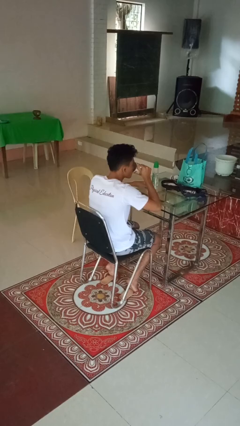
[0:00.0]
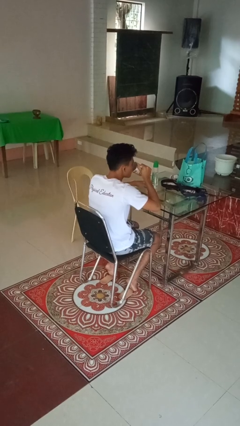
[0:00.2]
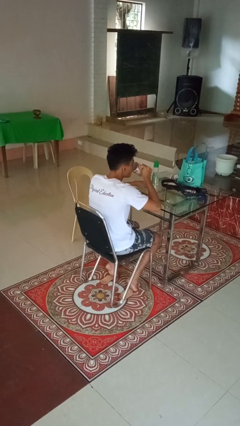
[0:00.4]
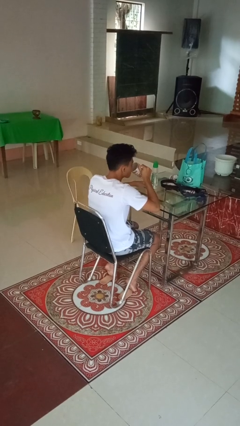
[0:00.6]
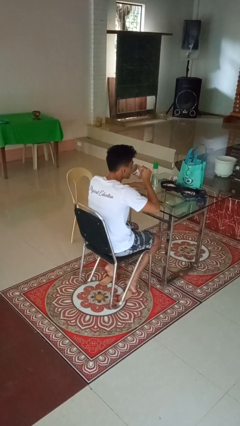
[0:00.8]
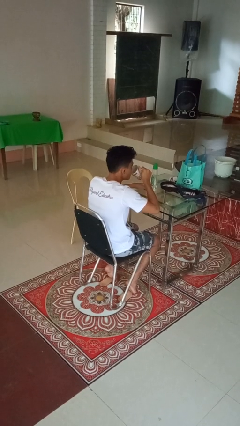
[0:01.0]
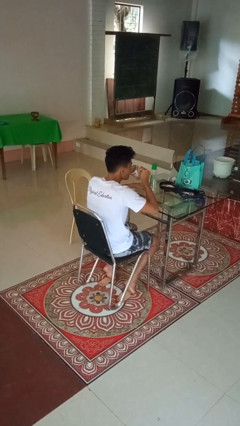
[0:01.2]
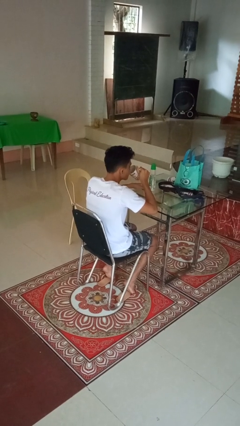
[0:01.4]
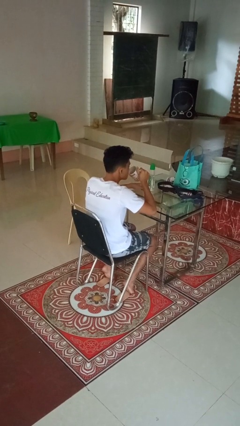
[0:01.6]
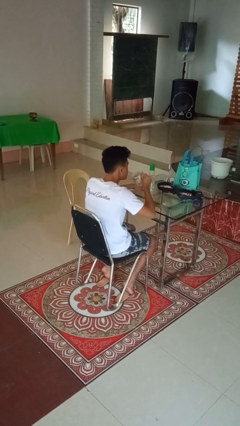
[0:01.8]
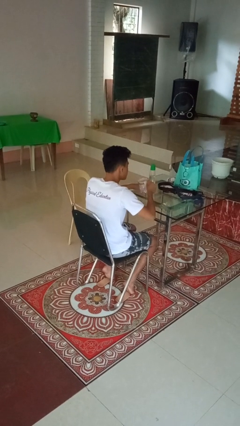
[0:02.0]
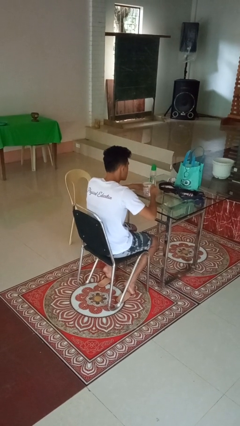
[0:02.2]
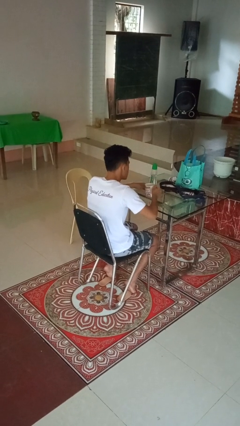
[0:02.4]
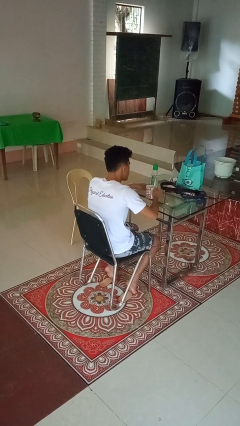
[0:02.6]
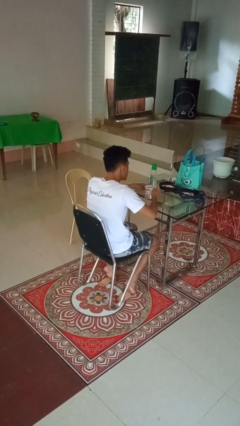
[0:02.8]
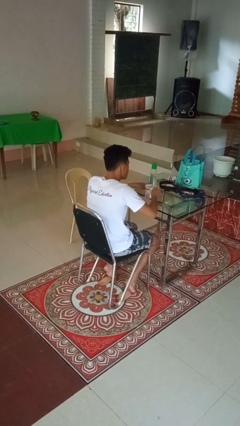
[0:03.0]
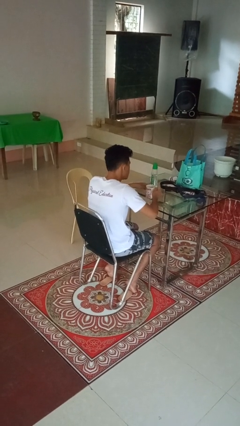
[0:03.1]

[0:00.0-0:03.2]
person drinks from shotglass

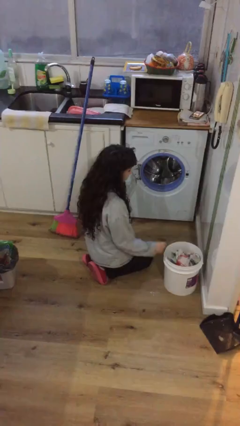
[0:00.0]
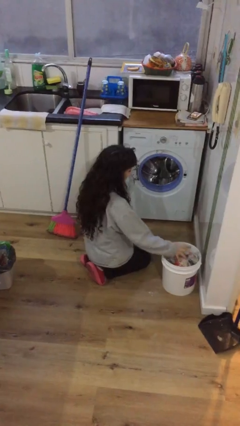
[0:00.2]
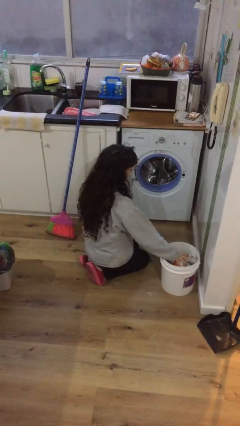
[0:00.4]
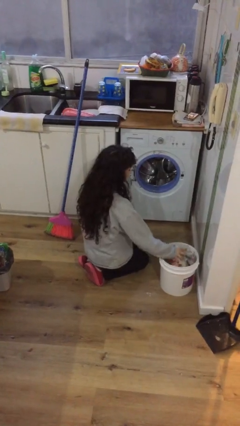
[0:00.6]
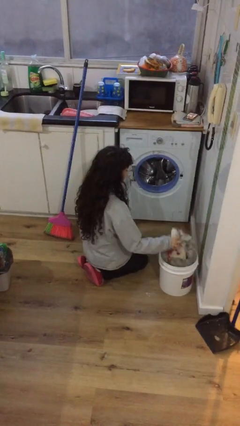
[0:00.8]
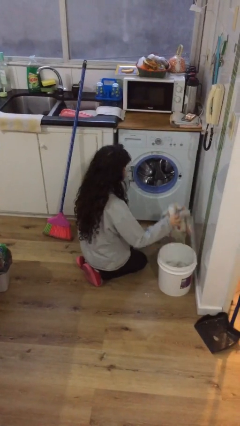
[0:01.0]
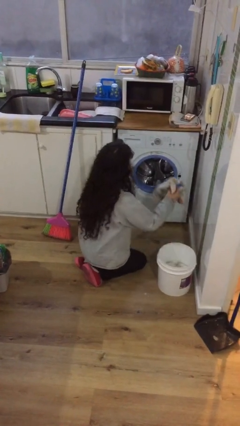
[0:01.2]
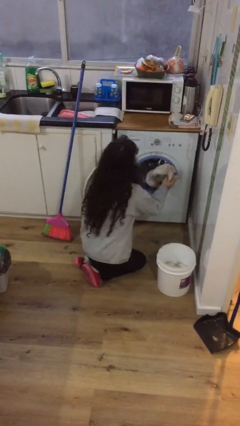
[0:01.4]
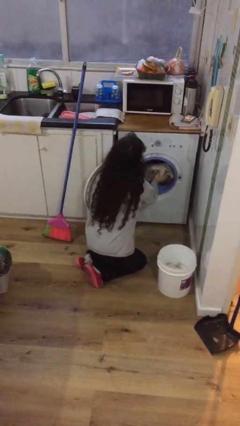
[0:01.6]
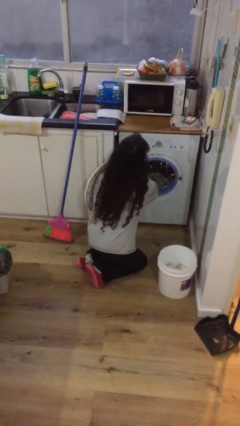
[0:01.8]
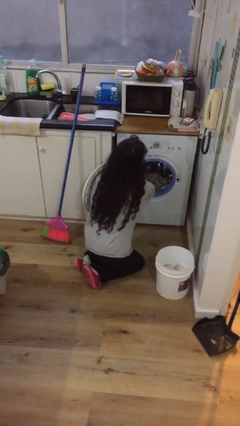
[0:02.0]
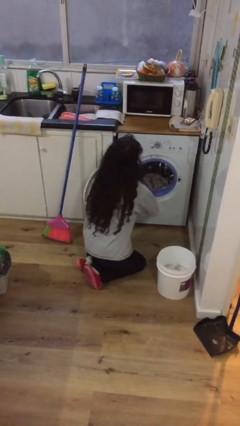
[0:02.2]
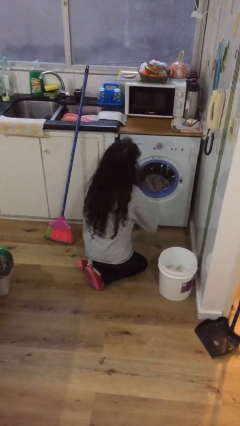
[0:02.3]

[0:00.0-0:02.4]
person loads dryer

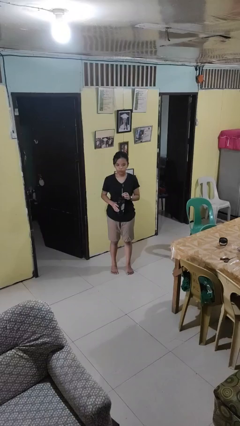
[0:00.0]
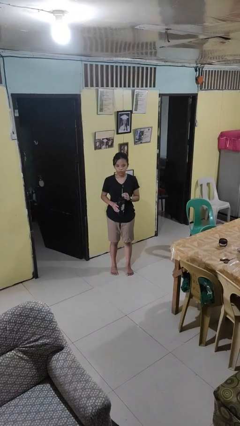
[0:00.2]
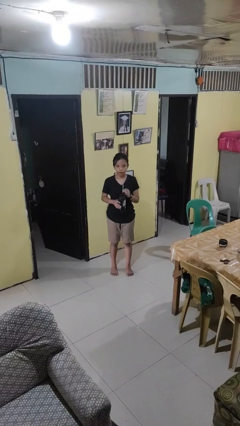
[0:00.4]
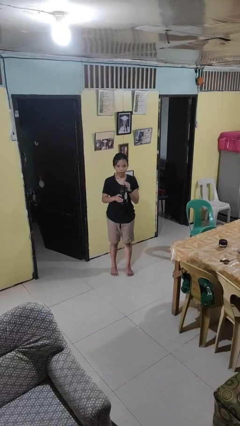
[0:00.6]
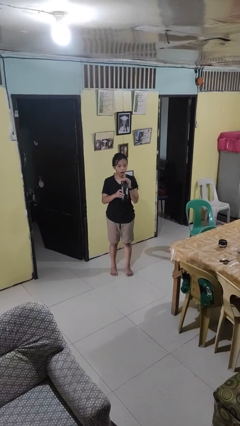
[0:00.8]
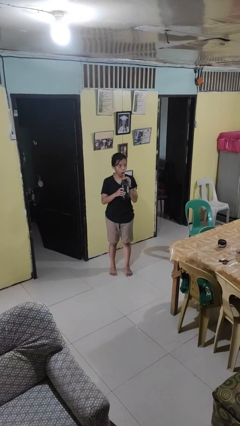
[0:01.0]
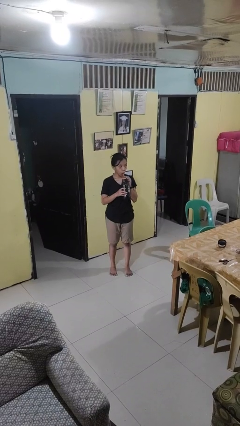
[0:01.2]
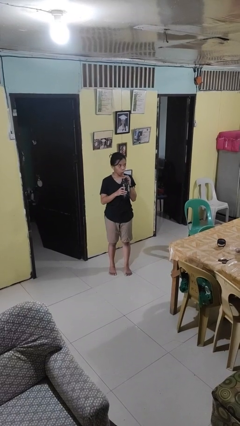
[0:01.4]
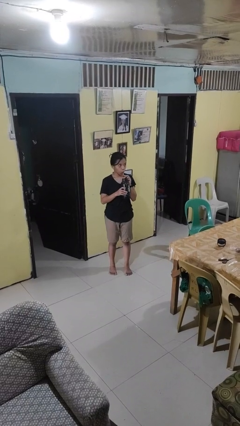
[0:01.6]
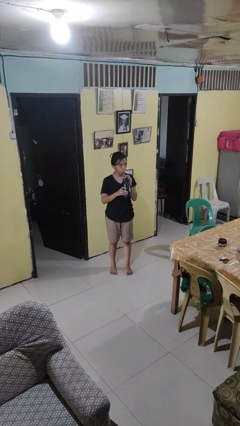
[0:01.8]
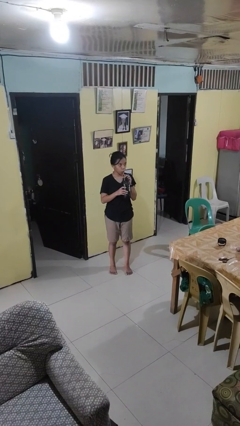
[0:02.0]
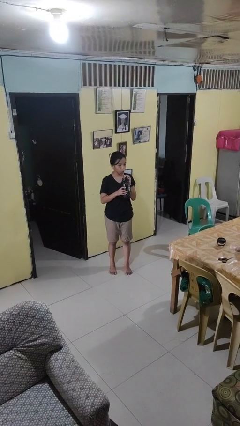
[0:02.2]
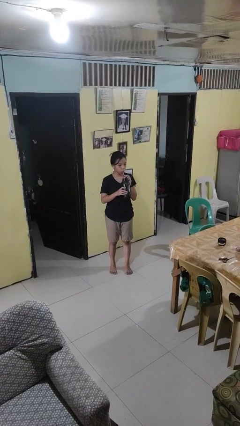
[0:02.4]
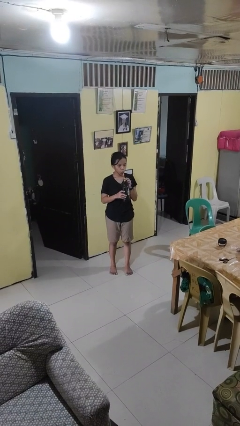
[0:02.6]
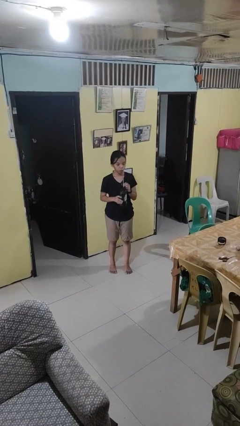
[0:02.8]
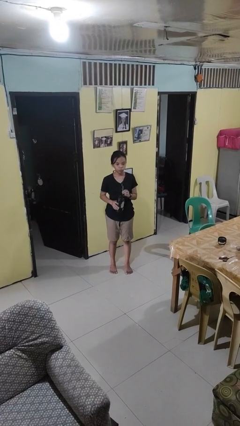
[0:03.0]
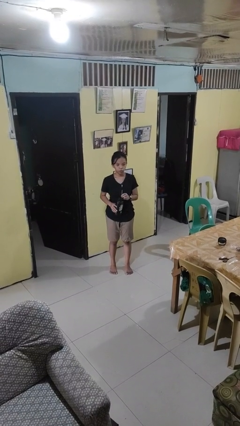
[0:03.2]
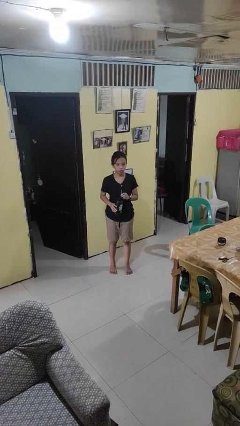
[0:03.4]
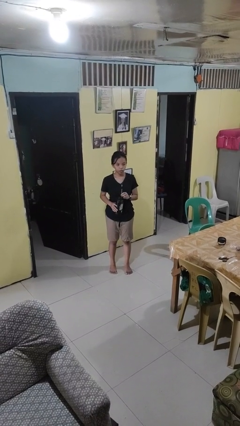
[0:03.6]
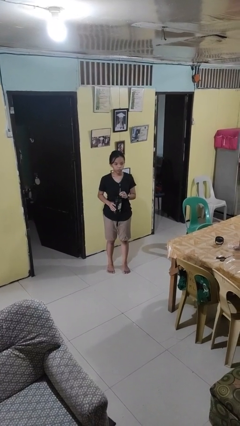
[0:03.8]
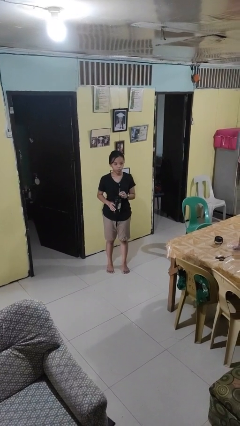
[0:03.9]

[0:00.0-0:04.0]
person drinks from straw

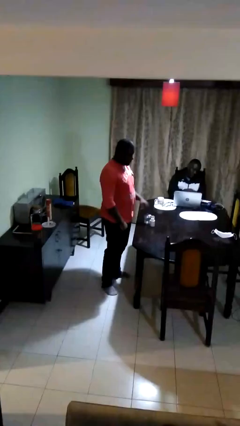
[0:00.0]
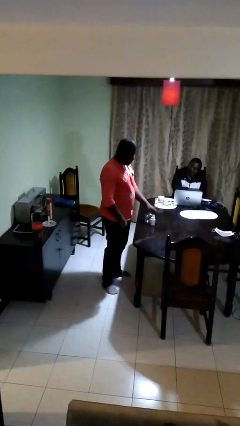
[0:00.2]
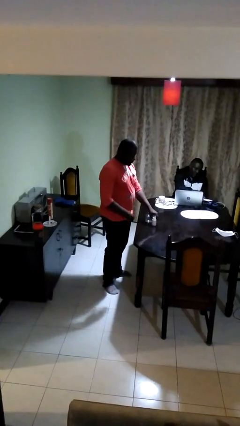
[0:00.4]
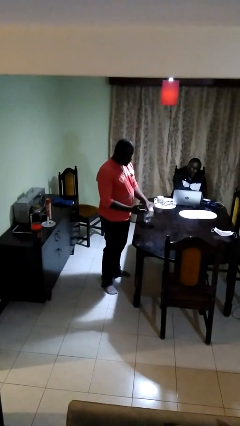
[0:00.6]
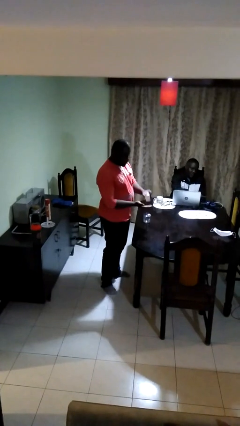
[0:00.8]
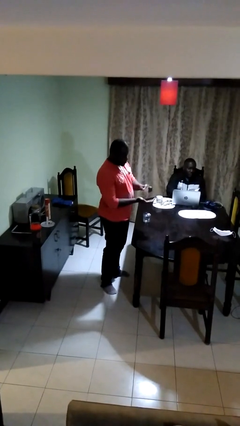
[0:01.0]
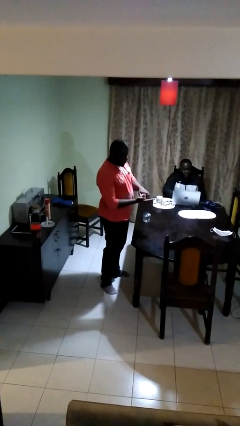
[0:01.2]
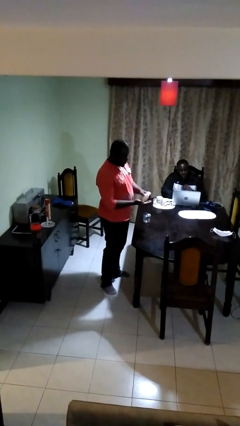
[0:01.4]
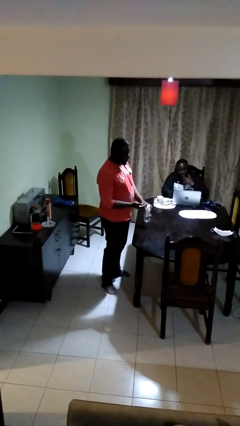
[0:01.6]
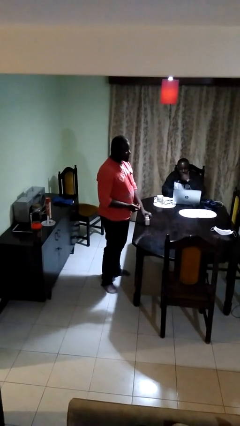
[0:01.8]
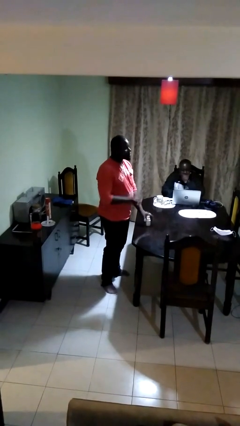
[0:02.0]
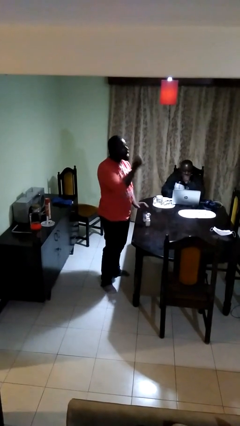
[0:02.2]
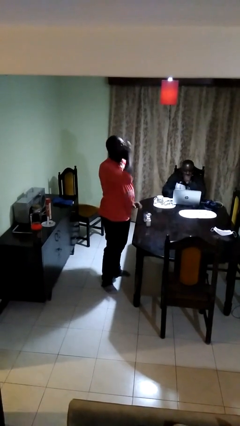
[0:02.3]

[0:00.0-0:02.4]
person takes medicine pills

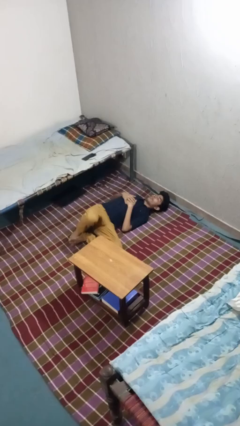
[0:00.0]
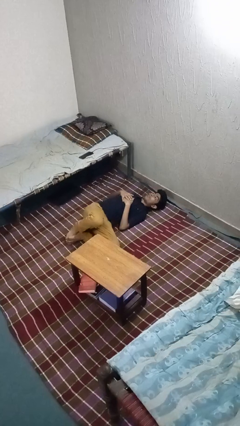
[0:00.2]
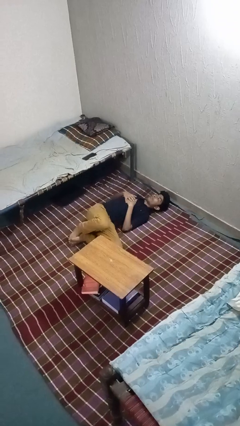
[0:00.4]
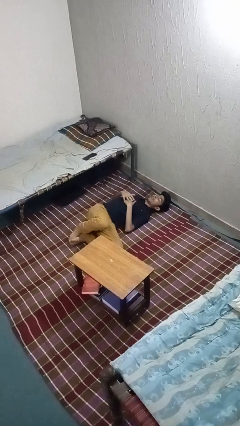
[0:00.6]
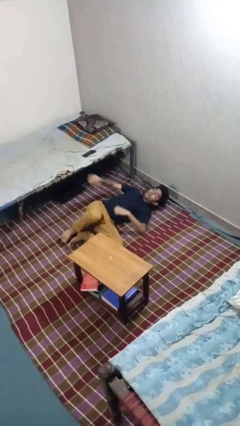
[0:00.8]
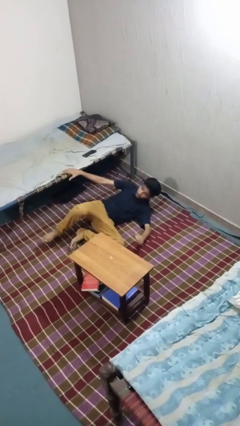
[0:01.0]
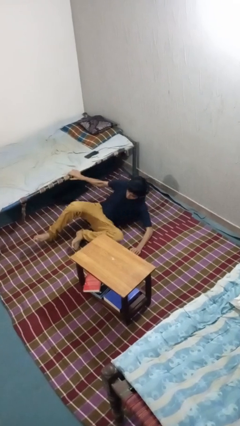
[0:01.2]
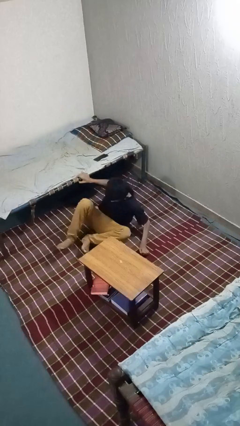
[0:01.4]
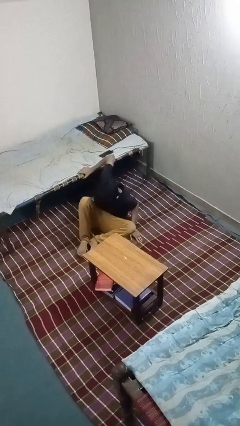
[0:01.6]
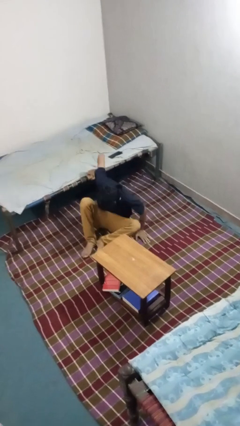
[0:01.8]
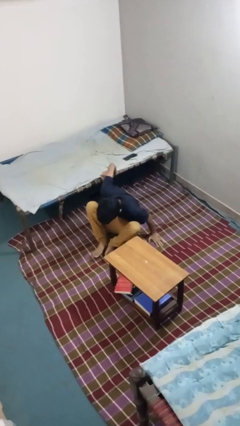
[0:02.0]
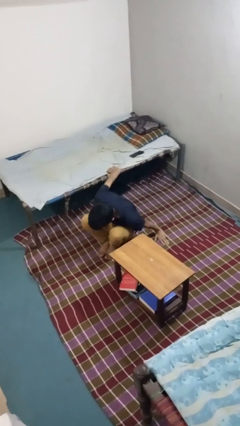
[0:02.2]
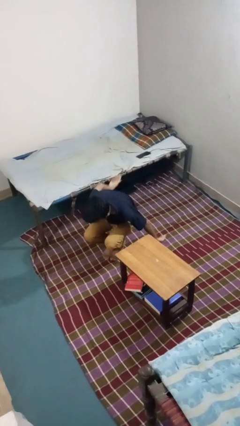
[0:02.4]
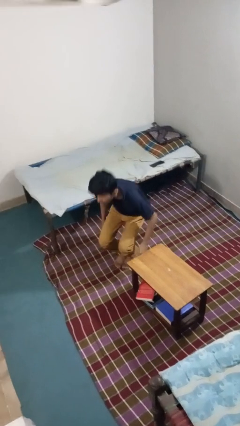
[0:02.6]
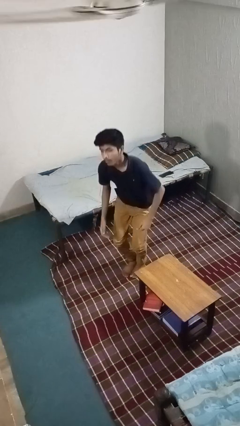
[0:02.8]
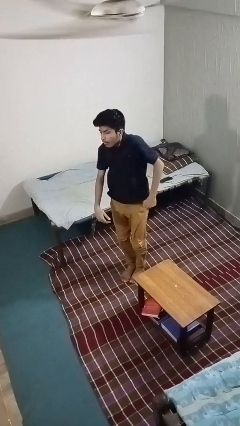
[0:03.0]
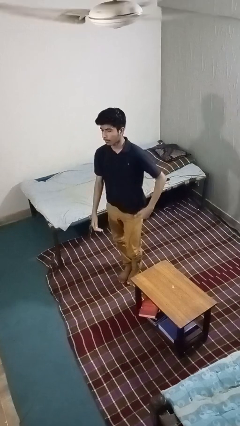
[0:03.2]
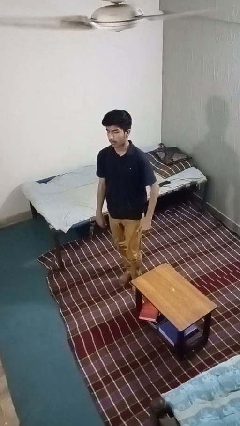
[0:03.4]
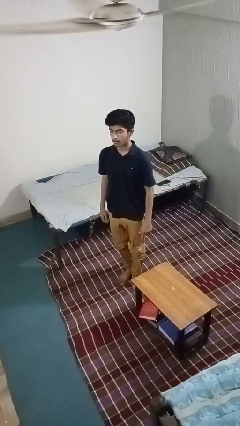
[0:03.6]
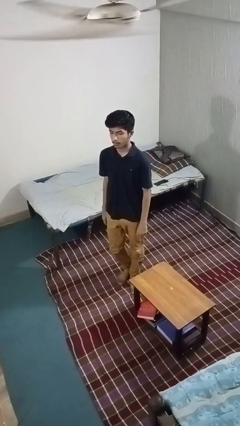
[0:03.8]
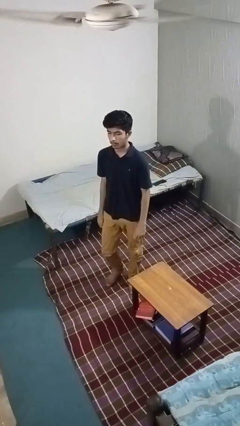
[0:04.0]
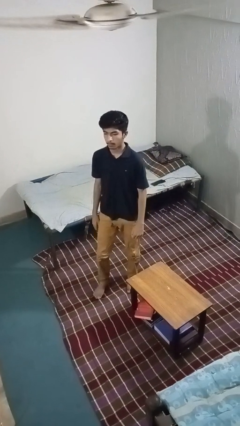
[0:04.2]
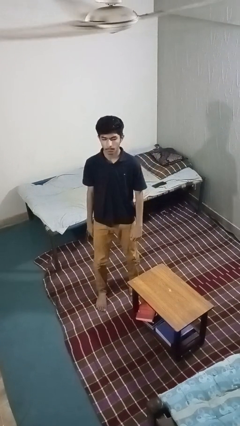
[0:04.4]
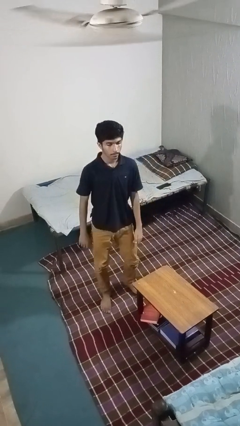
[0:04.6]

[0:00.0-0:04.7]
person stands up from floor

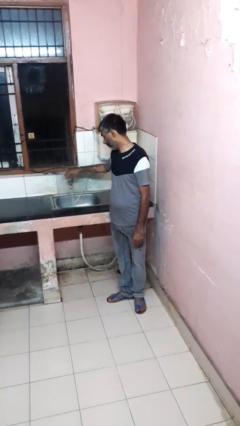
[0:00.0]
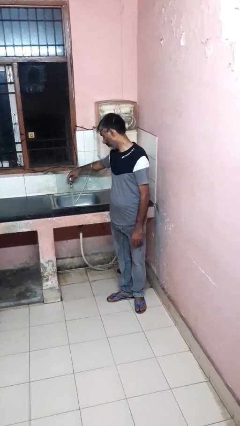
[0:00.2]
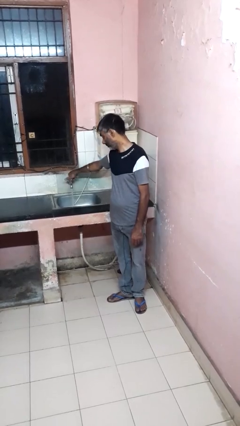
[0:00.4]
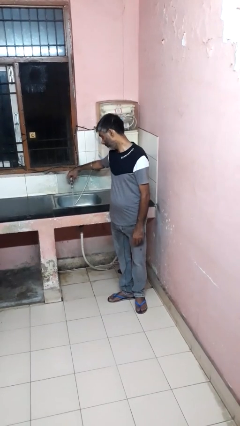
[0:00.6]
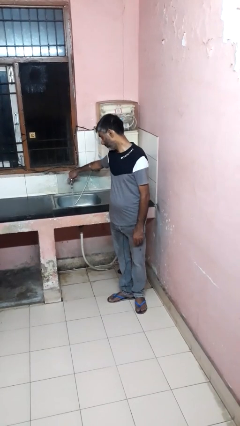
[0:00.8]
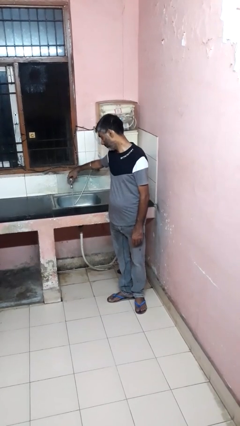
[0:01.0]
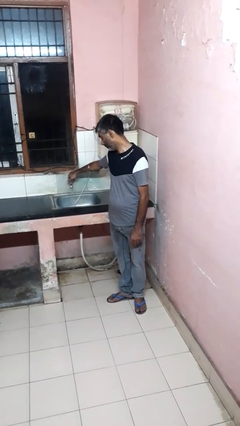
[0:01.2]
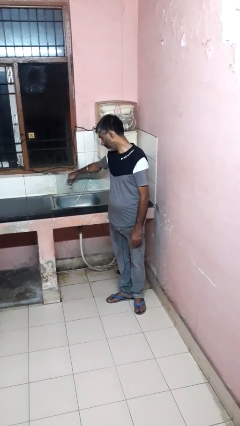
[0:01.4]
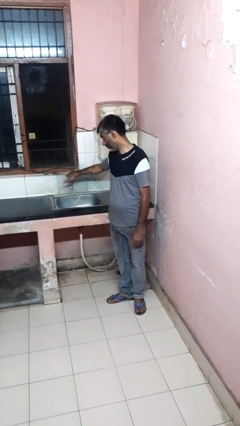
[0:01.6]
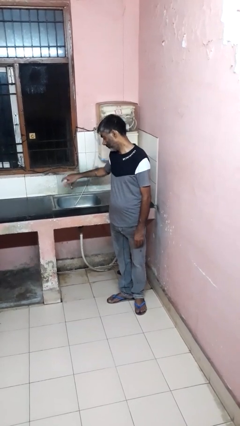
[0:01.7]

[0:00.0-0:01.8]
person turns off faucet
